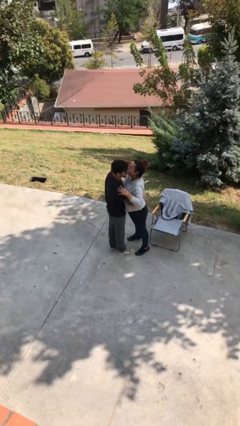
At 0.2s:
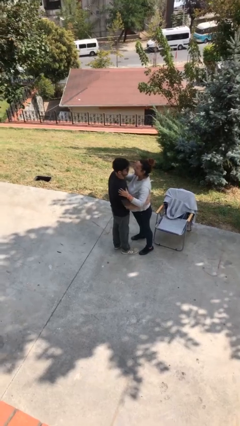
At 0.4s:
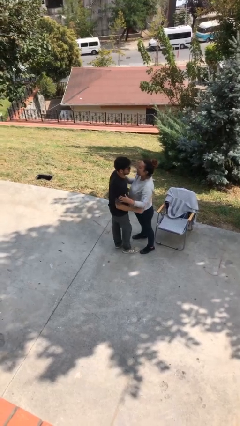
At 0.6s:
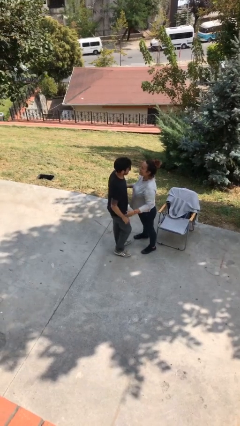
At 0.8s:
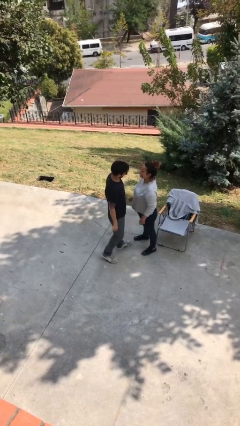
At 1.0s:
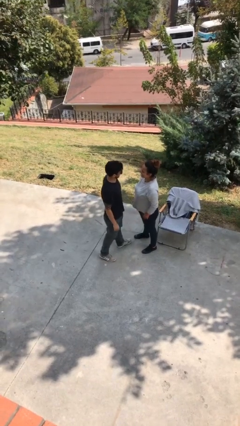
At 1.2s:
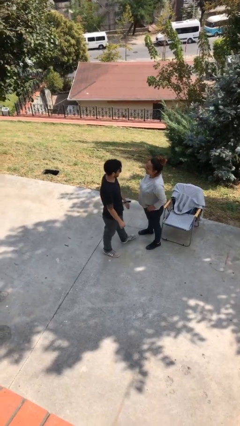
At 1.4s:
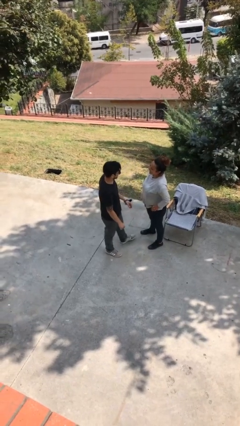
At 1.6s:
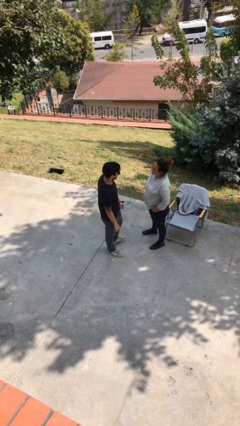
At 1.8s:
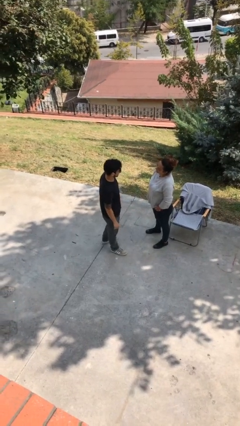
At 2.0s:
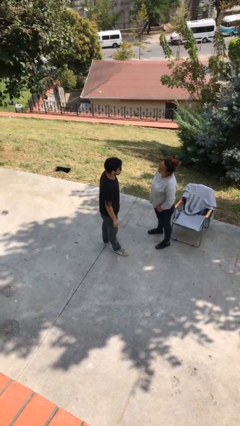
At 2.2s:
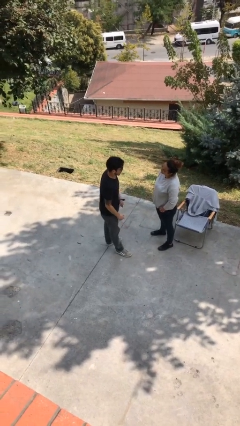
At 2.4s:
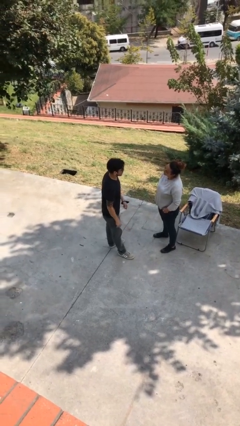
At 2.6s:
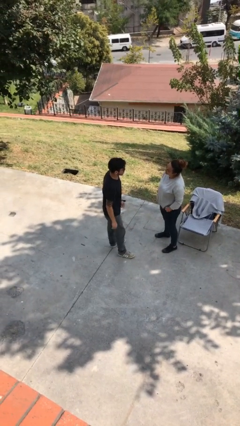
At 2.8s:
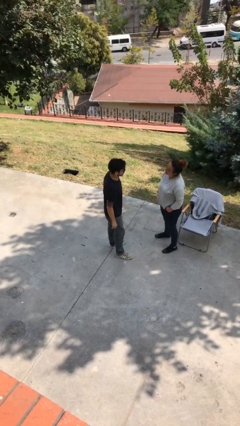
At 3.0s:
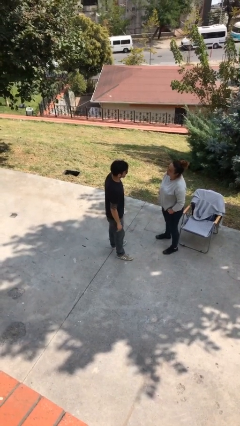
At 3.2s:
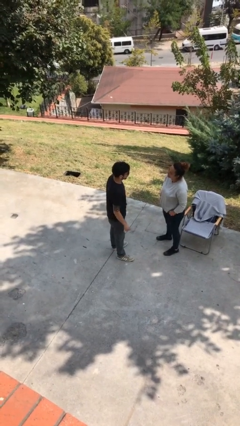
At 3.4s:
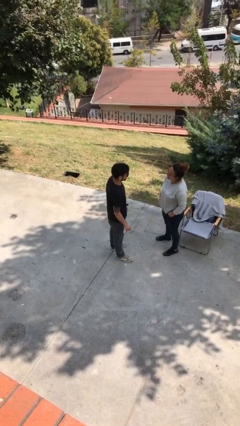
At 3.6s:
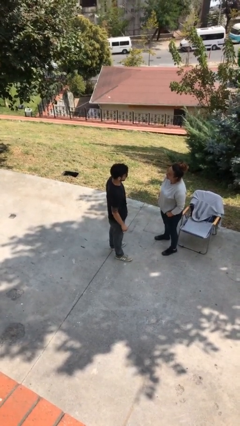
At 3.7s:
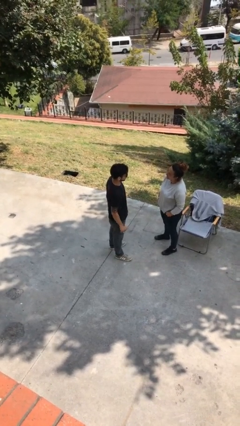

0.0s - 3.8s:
person talks to person

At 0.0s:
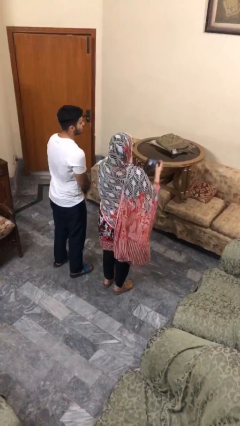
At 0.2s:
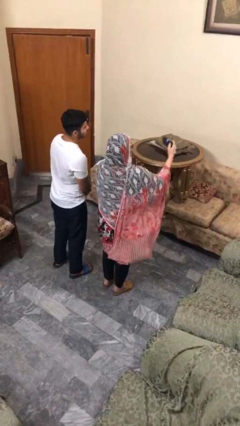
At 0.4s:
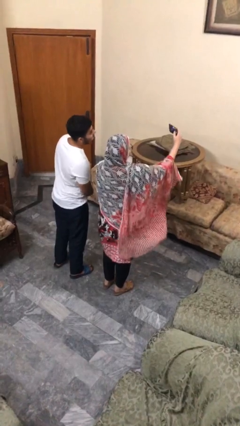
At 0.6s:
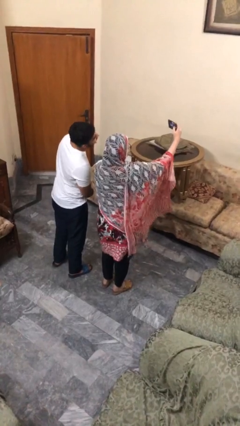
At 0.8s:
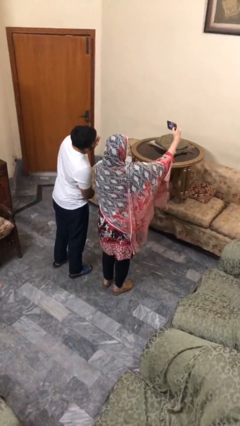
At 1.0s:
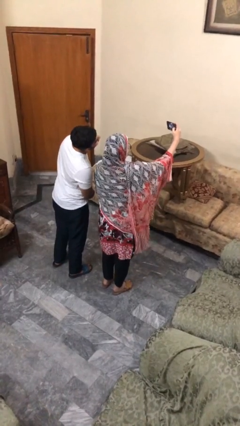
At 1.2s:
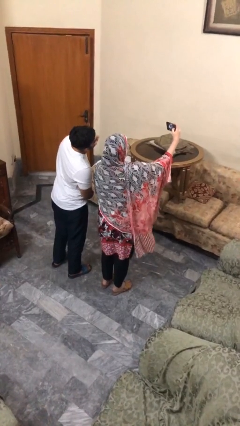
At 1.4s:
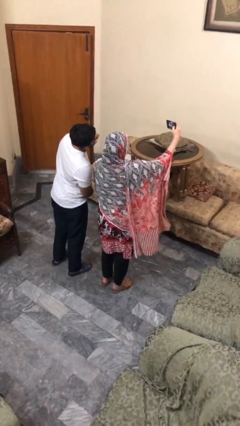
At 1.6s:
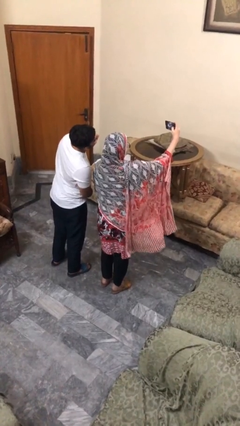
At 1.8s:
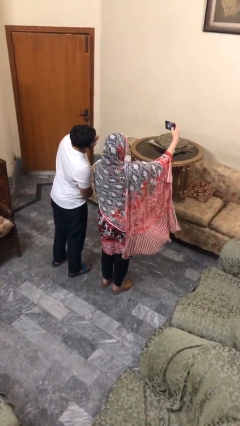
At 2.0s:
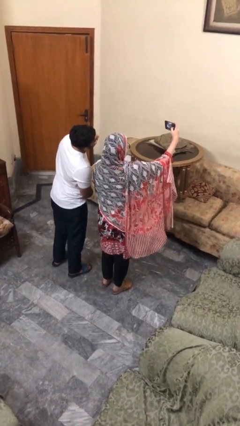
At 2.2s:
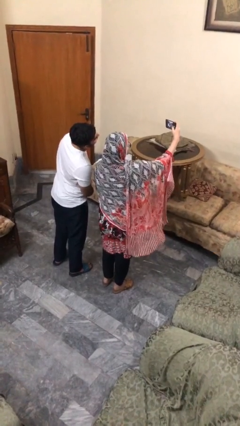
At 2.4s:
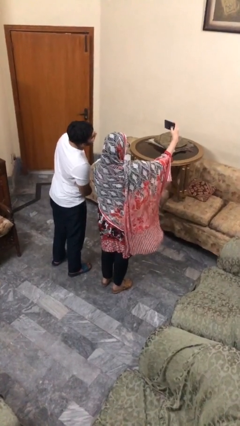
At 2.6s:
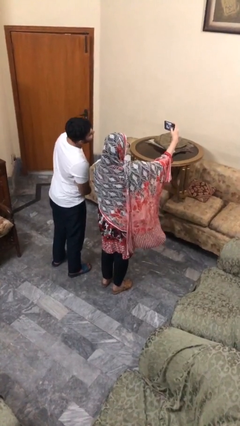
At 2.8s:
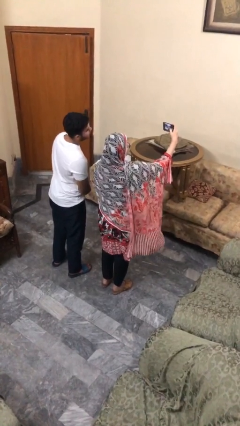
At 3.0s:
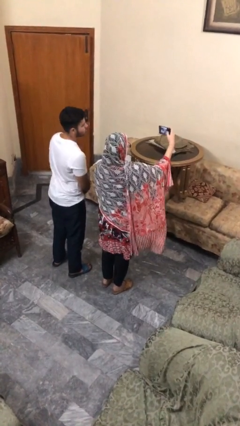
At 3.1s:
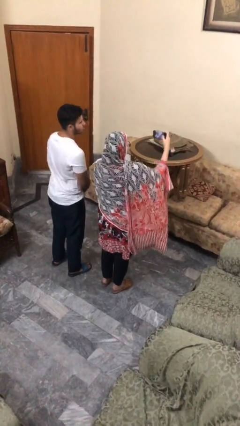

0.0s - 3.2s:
person takes selfie with person

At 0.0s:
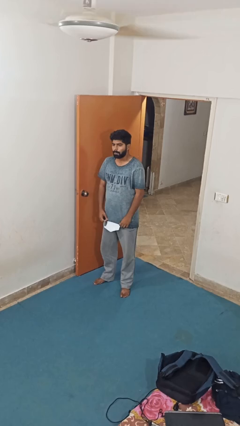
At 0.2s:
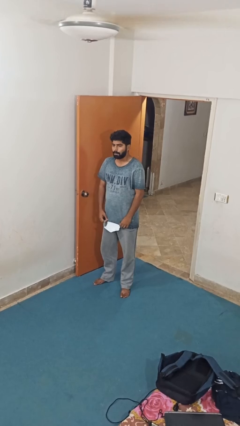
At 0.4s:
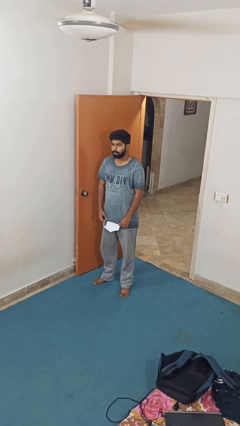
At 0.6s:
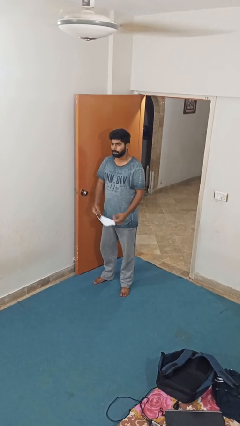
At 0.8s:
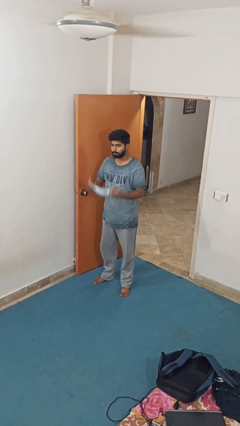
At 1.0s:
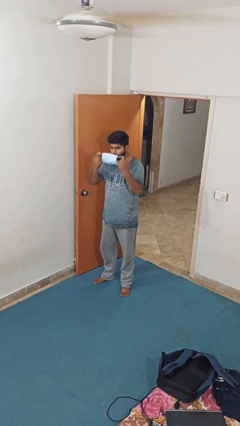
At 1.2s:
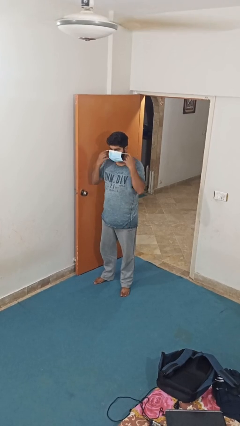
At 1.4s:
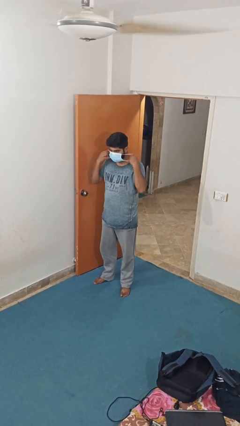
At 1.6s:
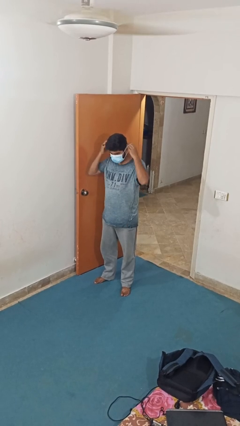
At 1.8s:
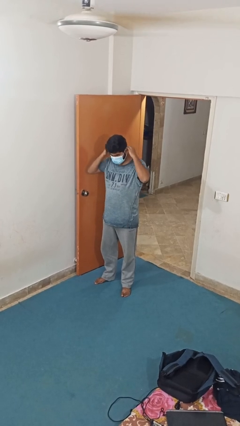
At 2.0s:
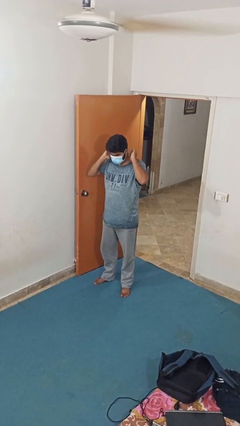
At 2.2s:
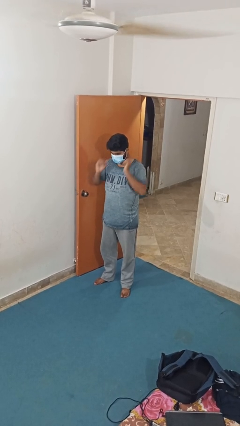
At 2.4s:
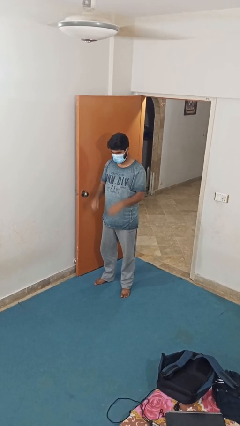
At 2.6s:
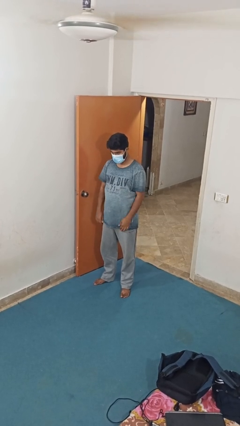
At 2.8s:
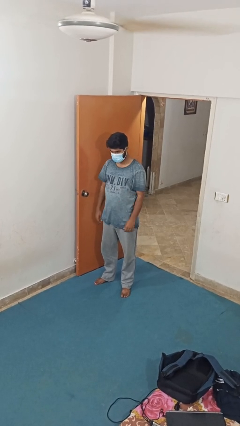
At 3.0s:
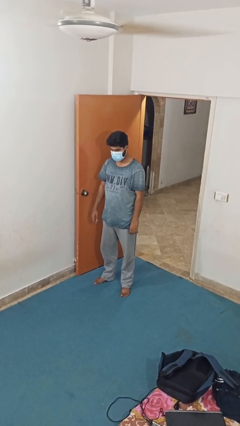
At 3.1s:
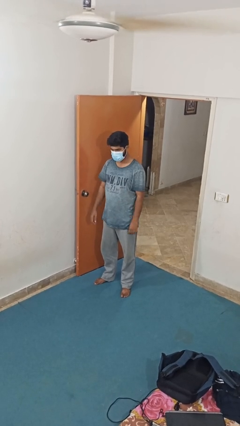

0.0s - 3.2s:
person puts on facemask

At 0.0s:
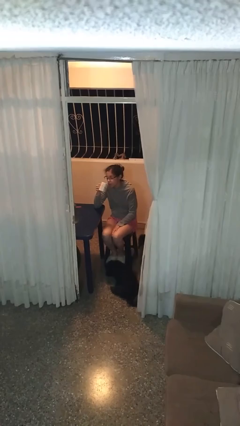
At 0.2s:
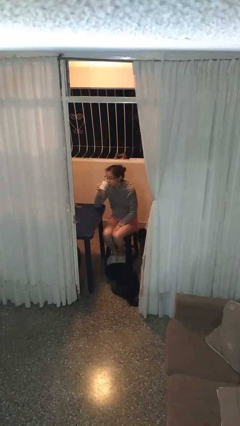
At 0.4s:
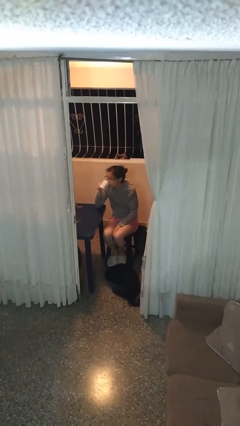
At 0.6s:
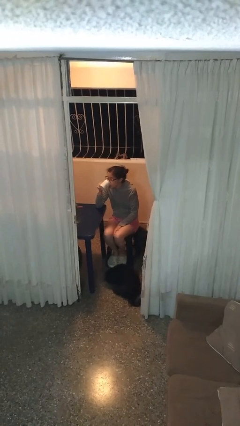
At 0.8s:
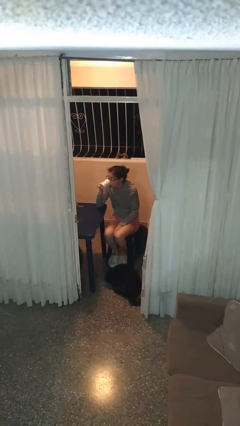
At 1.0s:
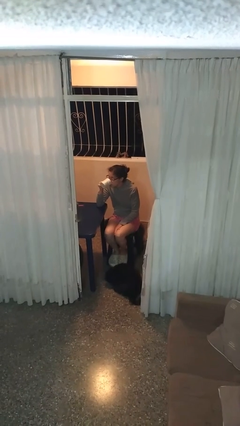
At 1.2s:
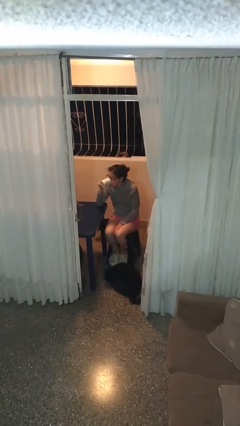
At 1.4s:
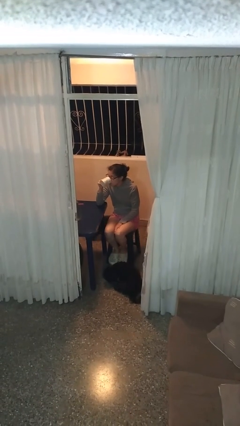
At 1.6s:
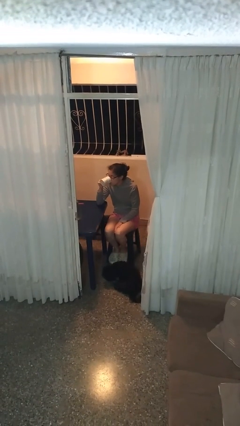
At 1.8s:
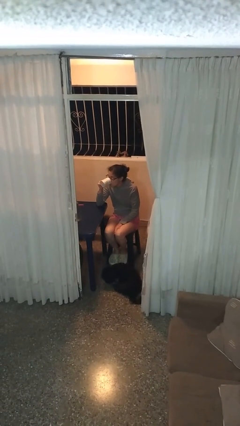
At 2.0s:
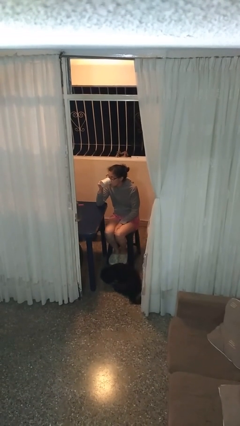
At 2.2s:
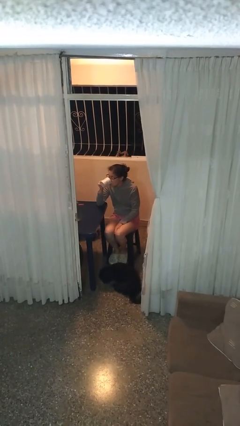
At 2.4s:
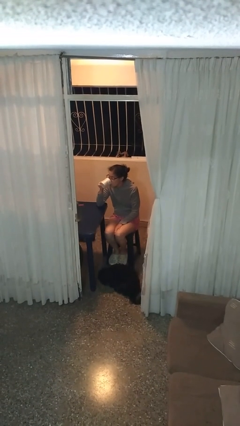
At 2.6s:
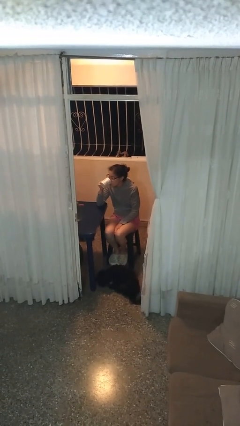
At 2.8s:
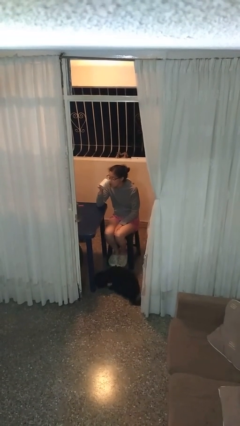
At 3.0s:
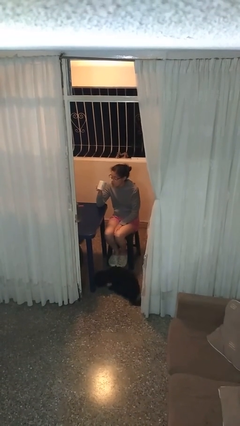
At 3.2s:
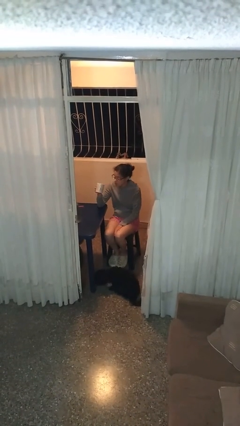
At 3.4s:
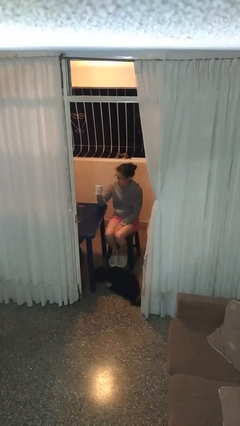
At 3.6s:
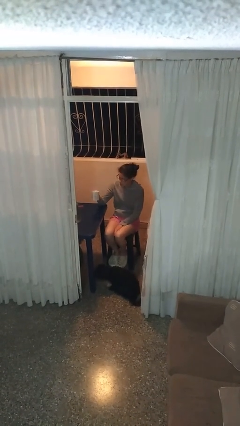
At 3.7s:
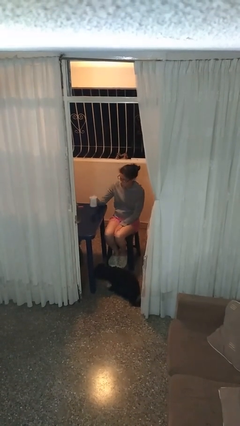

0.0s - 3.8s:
person drinks from mug

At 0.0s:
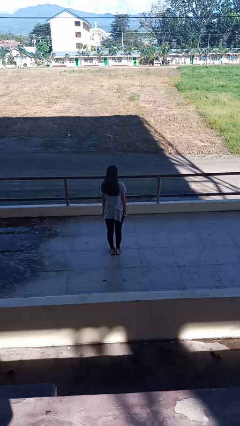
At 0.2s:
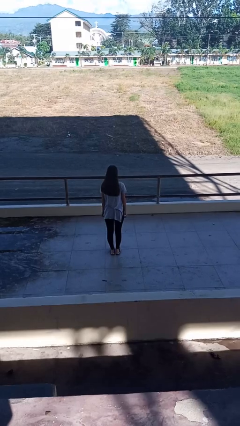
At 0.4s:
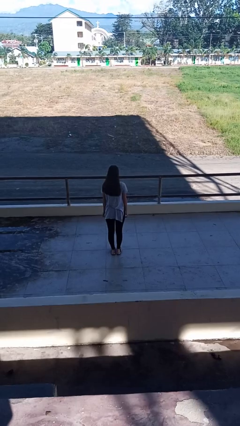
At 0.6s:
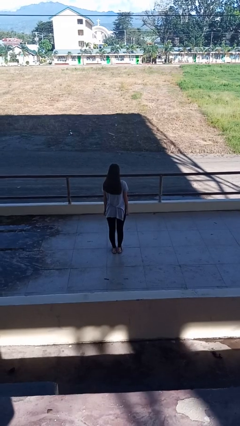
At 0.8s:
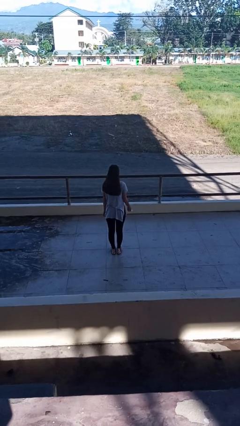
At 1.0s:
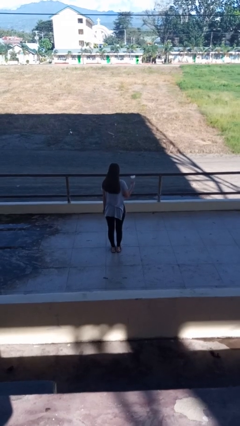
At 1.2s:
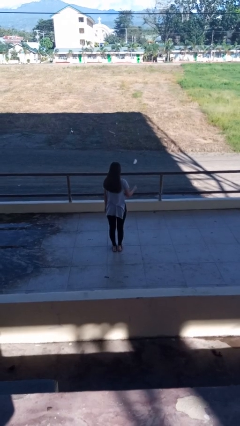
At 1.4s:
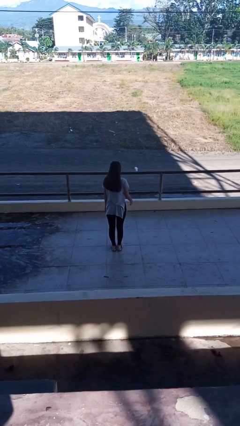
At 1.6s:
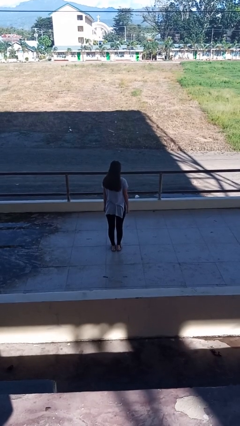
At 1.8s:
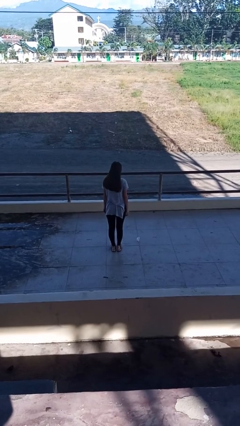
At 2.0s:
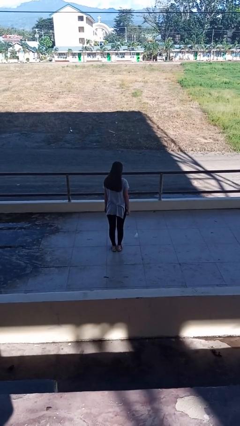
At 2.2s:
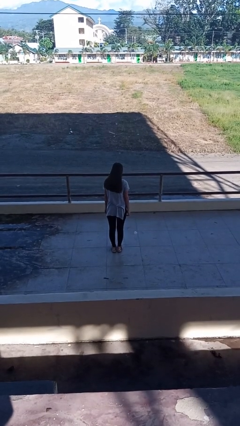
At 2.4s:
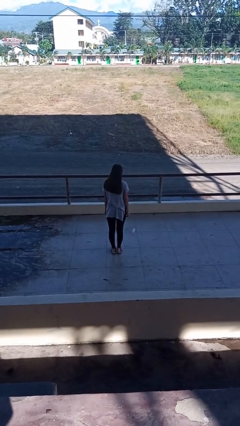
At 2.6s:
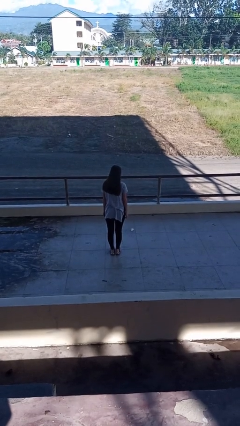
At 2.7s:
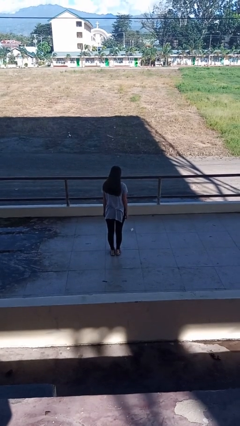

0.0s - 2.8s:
person throws object into air

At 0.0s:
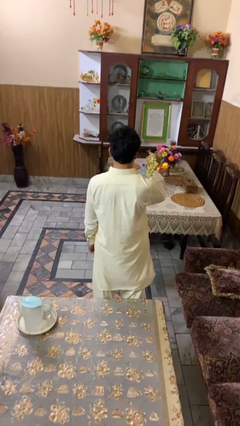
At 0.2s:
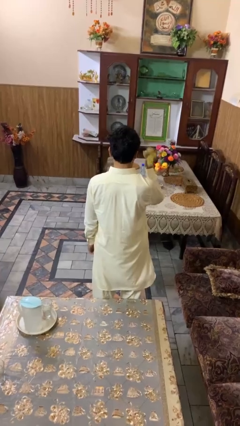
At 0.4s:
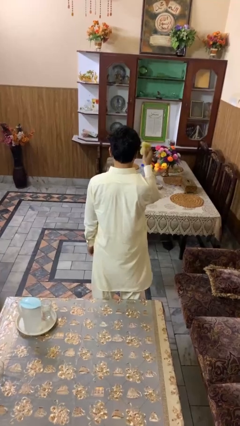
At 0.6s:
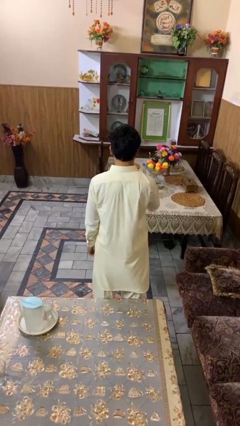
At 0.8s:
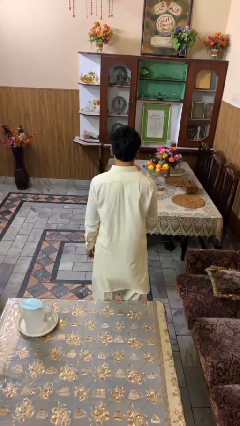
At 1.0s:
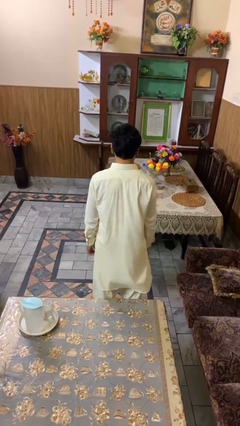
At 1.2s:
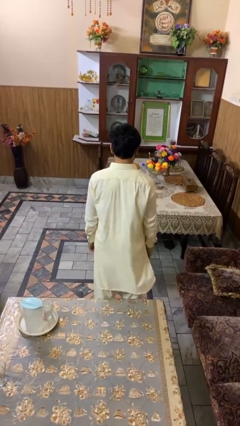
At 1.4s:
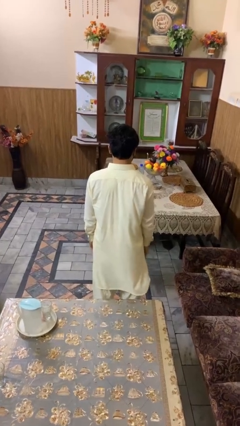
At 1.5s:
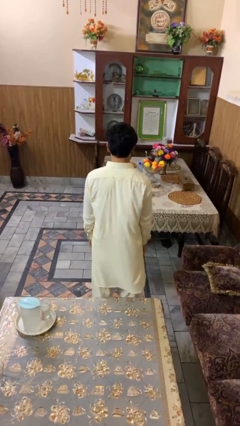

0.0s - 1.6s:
person throws object on table
